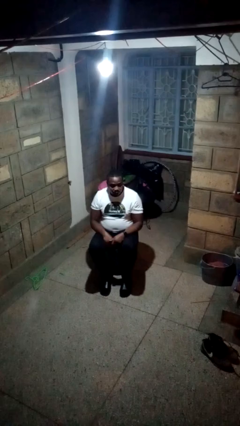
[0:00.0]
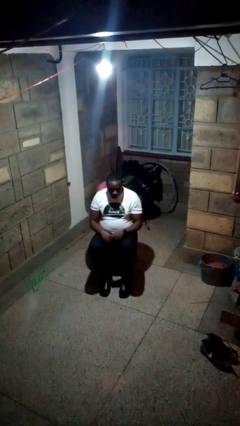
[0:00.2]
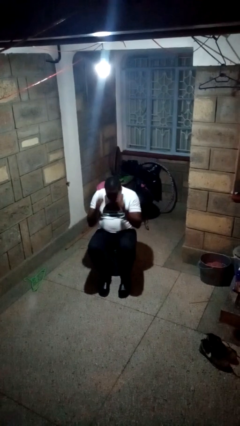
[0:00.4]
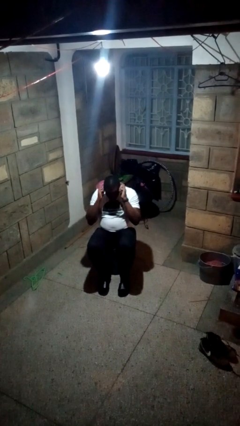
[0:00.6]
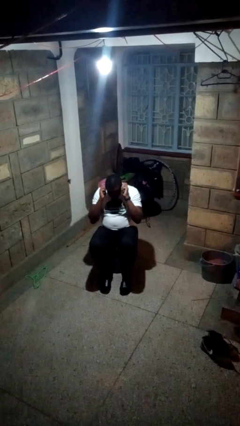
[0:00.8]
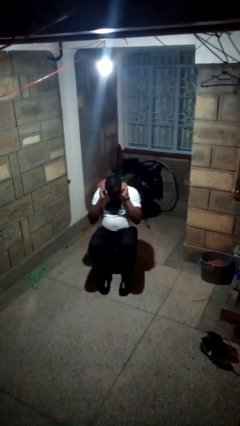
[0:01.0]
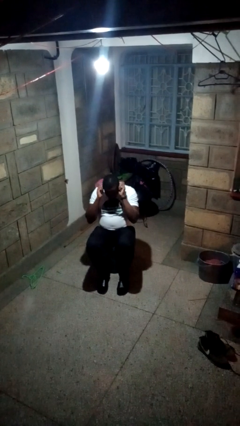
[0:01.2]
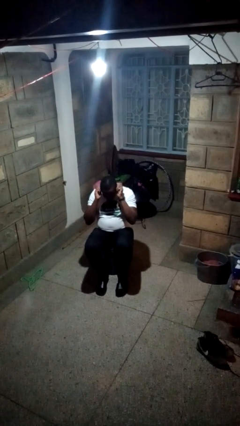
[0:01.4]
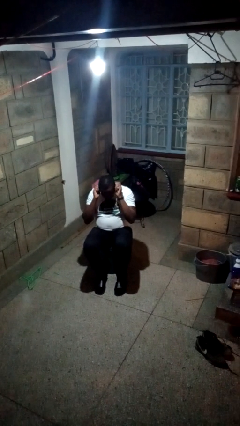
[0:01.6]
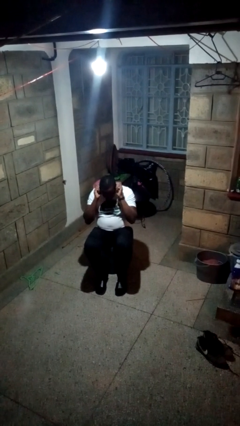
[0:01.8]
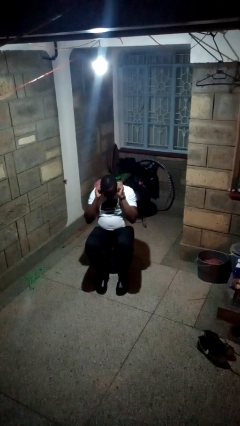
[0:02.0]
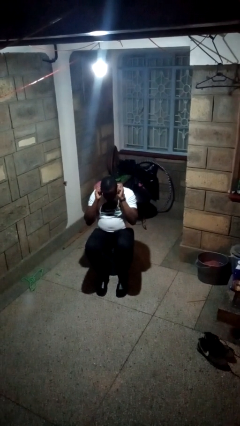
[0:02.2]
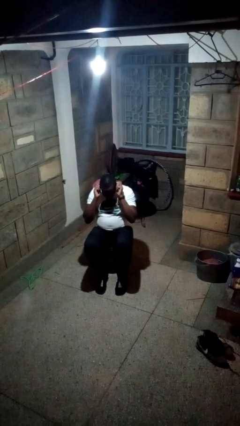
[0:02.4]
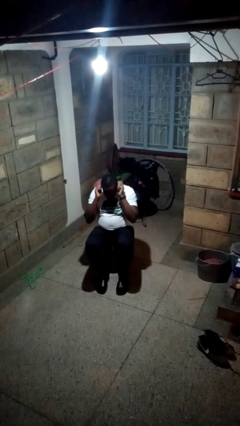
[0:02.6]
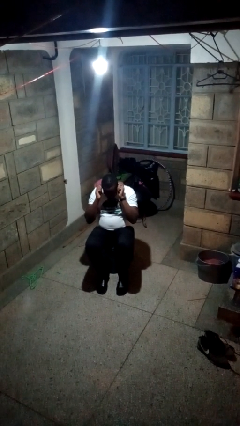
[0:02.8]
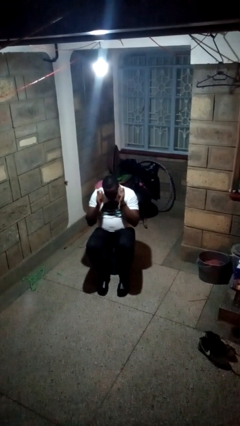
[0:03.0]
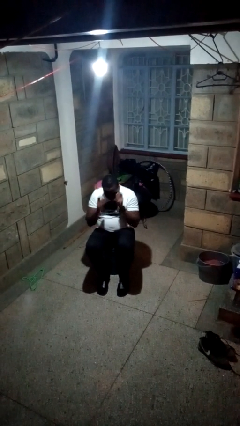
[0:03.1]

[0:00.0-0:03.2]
person touches earlobe

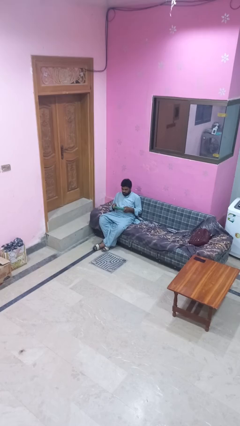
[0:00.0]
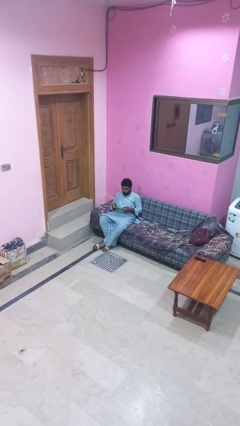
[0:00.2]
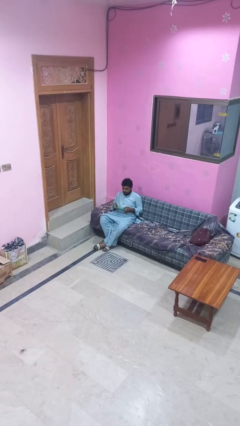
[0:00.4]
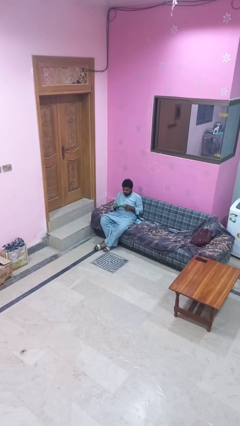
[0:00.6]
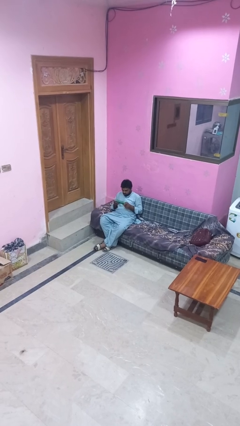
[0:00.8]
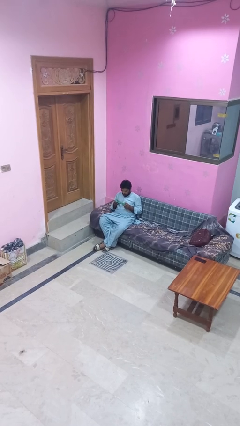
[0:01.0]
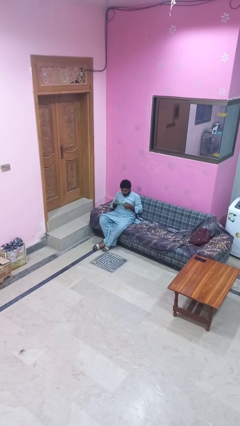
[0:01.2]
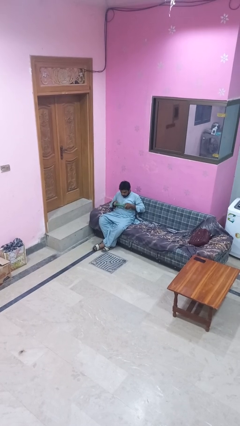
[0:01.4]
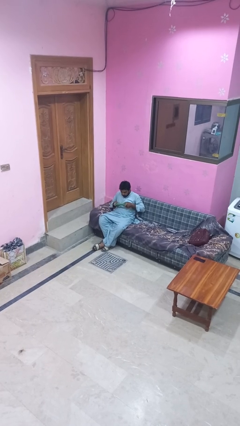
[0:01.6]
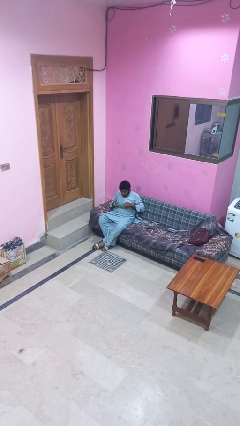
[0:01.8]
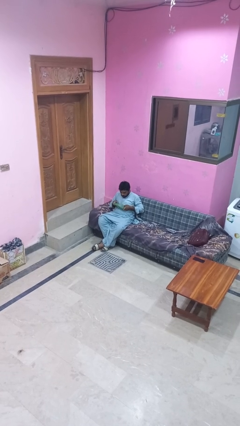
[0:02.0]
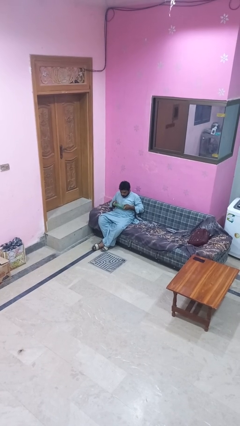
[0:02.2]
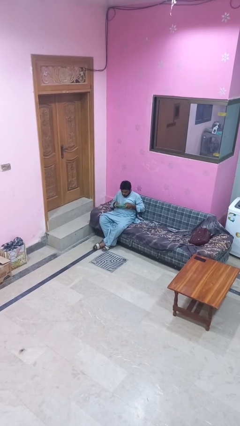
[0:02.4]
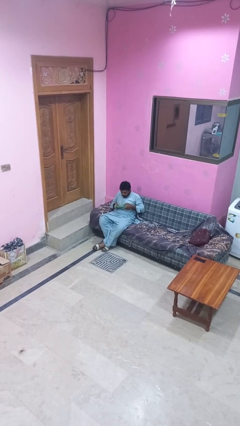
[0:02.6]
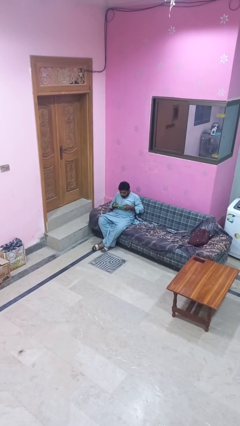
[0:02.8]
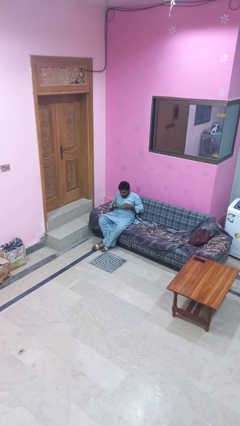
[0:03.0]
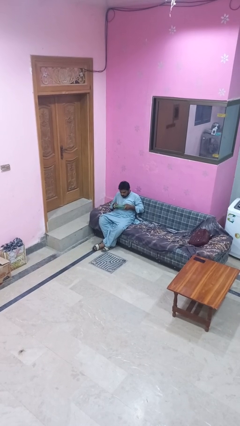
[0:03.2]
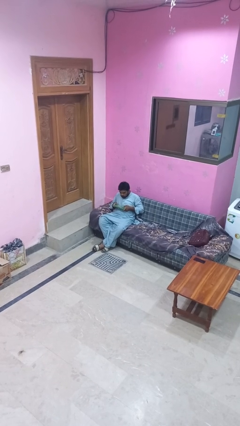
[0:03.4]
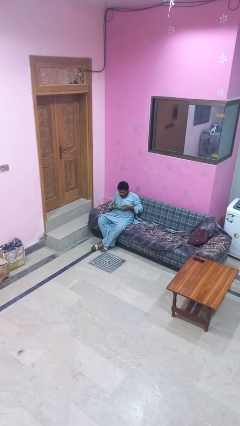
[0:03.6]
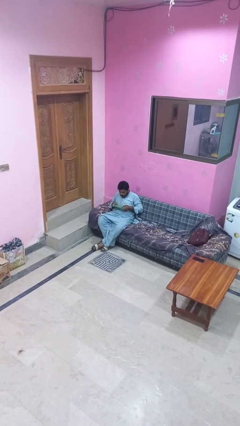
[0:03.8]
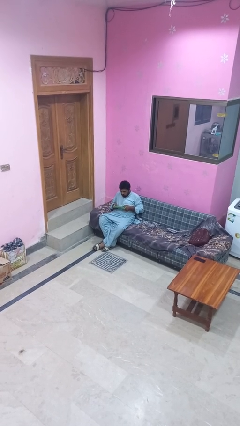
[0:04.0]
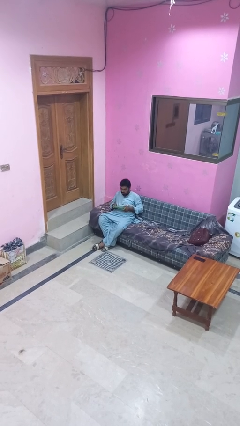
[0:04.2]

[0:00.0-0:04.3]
person interacts with handheld game

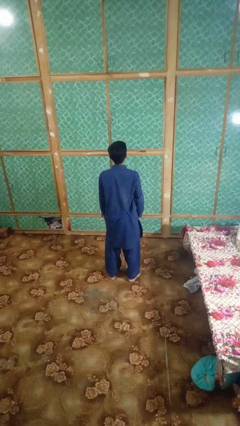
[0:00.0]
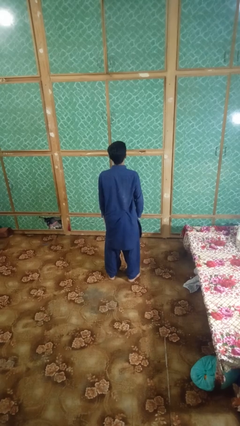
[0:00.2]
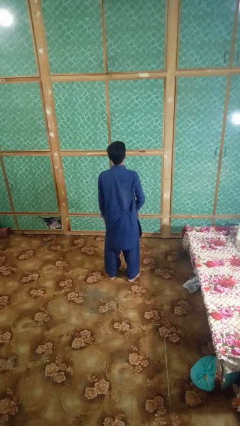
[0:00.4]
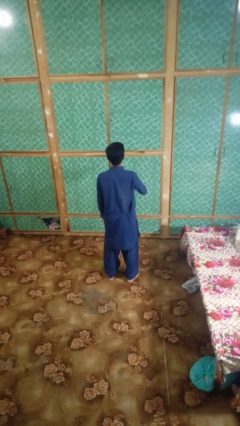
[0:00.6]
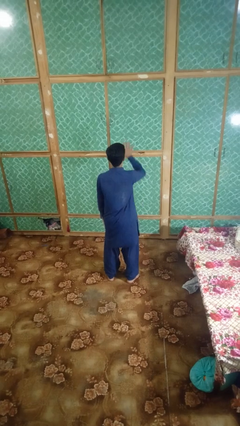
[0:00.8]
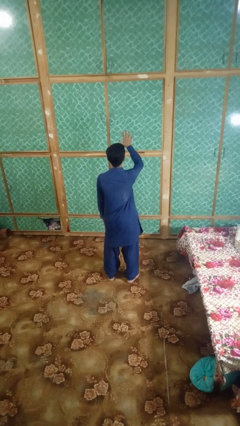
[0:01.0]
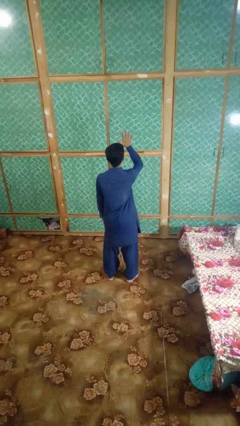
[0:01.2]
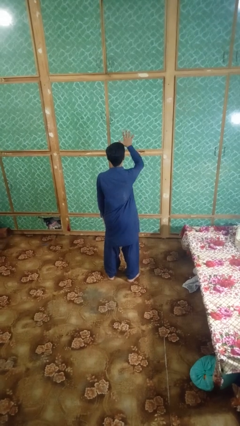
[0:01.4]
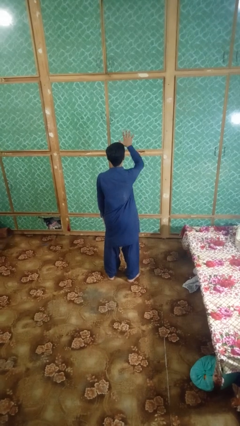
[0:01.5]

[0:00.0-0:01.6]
person gestures number five

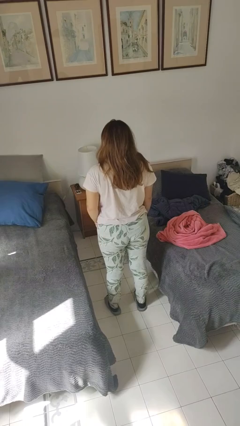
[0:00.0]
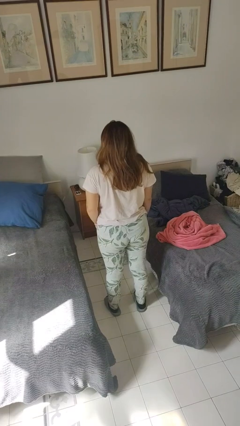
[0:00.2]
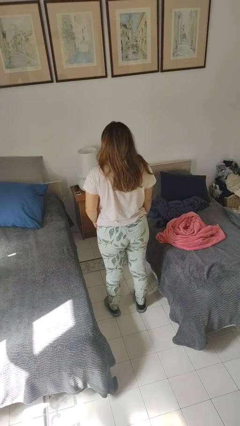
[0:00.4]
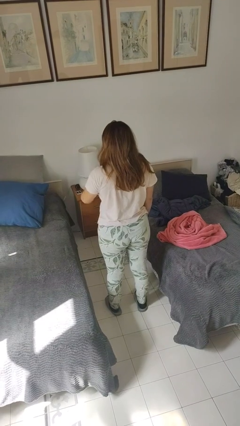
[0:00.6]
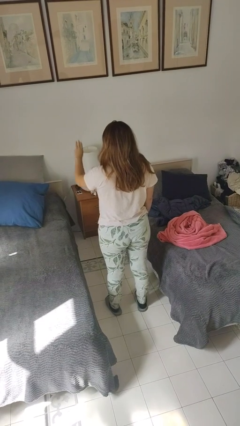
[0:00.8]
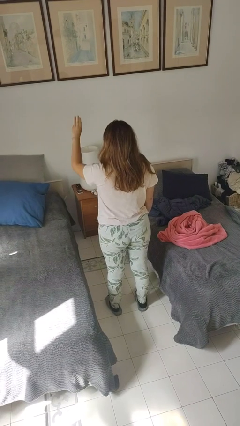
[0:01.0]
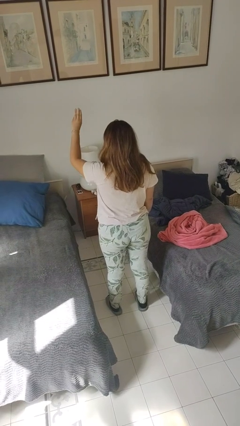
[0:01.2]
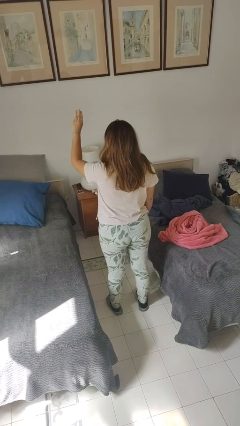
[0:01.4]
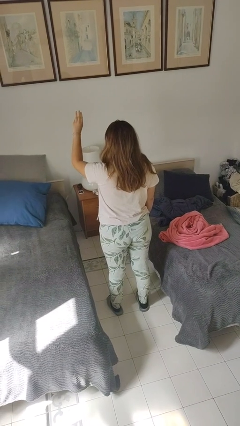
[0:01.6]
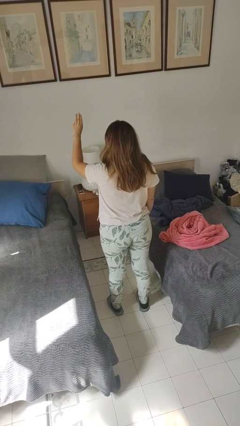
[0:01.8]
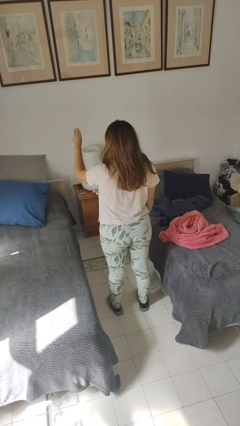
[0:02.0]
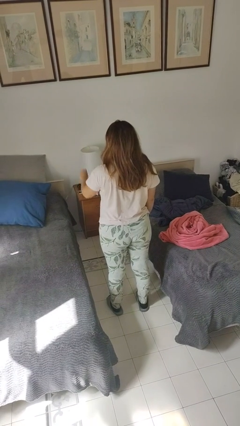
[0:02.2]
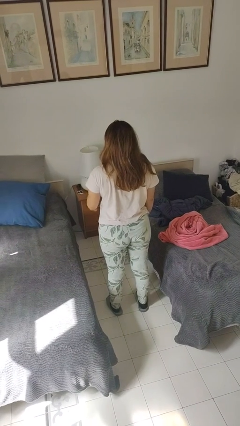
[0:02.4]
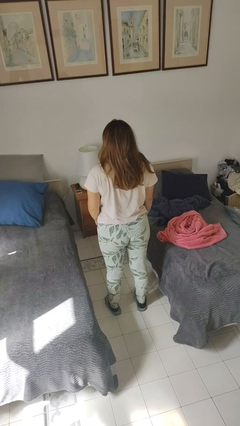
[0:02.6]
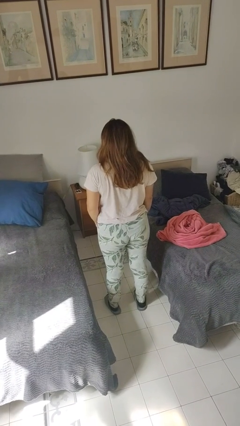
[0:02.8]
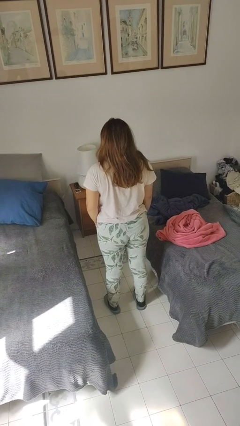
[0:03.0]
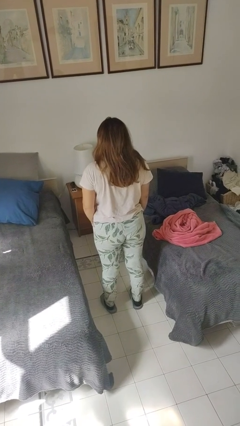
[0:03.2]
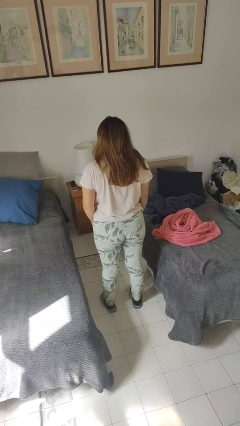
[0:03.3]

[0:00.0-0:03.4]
person gestures number three

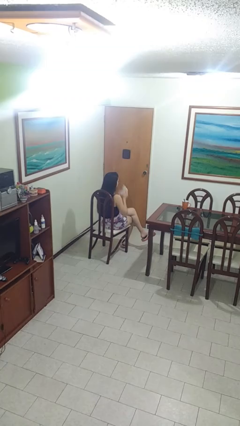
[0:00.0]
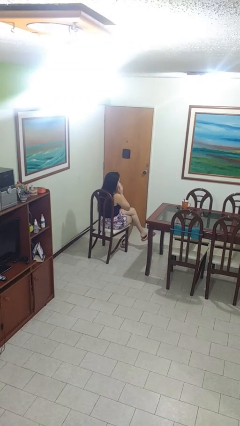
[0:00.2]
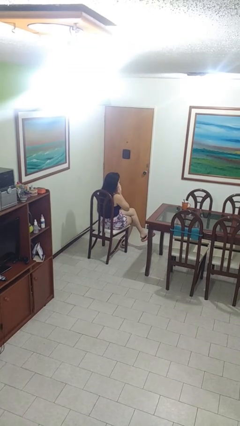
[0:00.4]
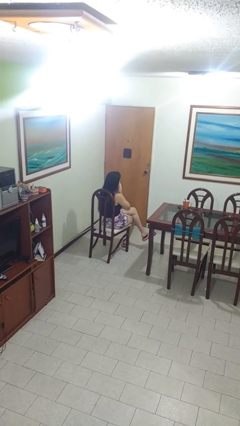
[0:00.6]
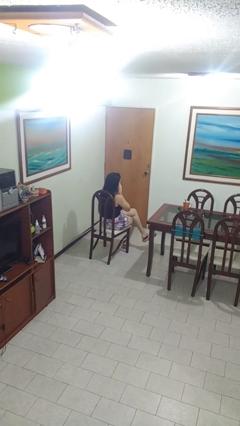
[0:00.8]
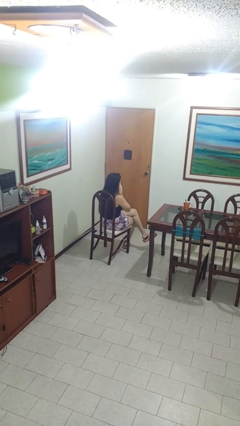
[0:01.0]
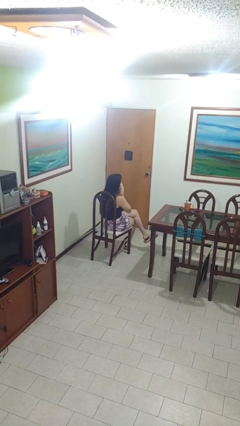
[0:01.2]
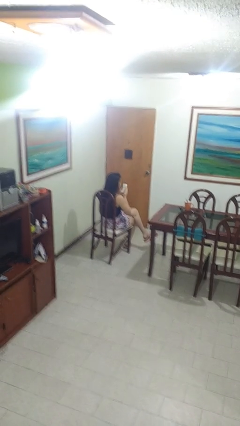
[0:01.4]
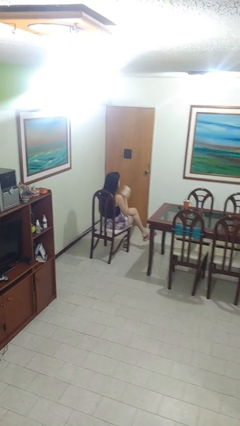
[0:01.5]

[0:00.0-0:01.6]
person blows nose

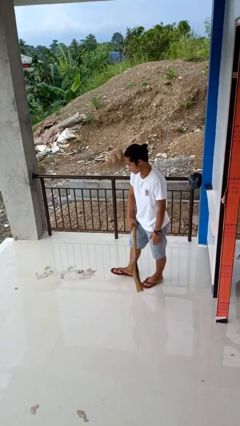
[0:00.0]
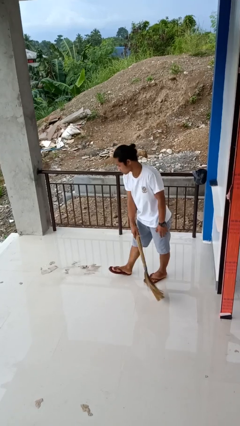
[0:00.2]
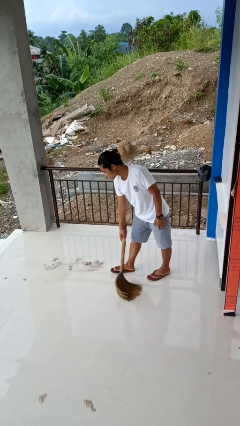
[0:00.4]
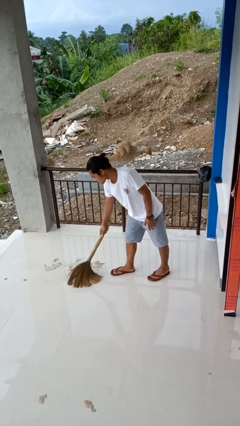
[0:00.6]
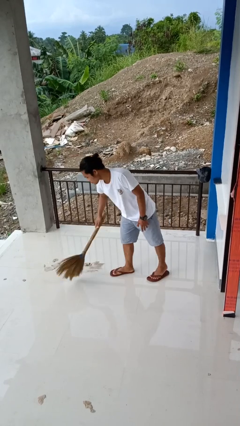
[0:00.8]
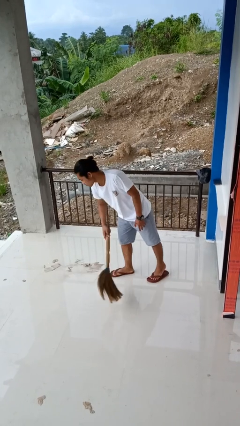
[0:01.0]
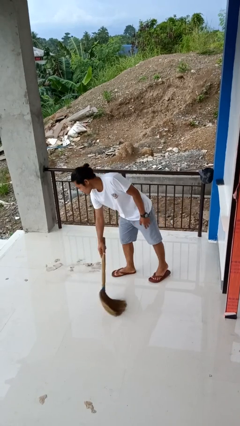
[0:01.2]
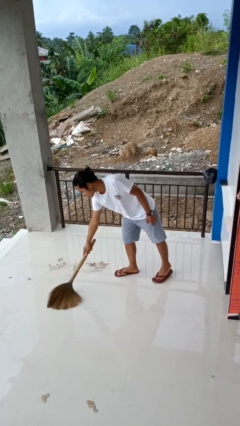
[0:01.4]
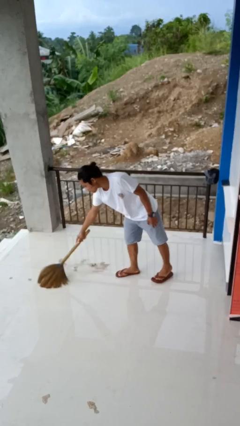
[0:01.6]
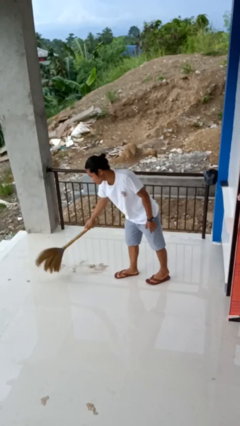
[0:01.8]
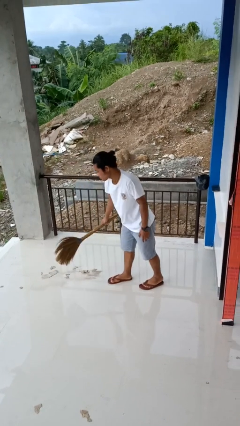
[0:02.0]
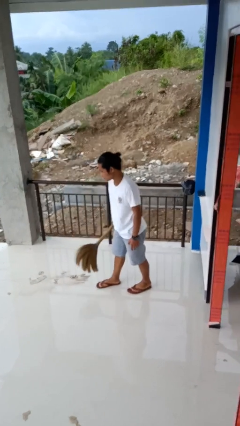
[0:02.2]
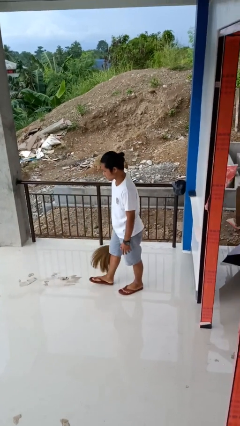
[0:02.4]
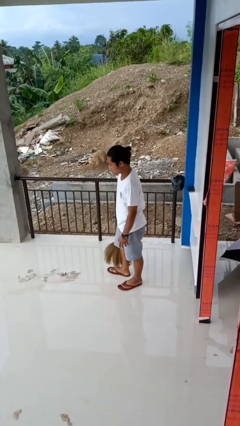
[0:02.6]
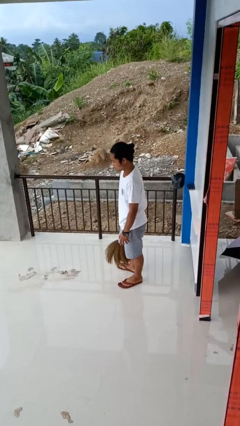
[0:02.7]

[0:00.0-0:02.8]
person sweeps floor

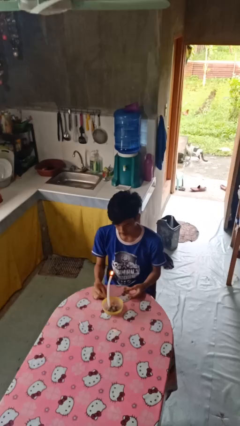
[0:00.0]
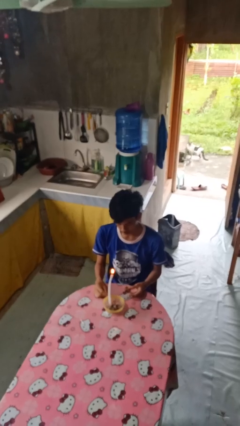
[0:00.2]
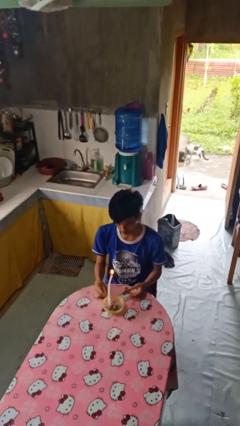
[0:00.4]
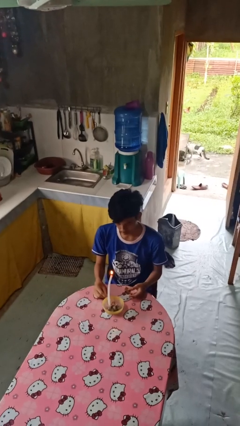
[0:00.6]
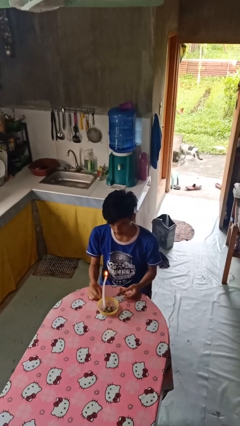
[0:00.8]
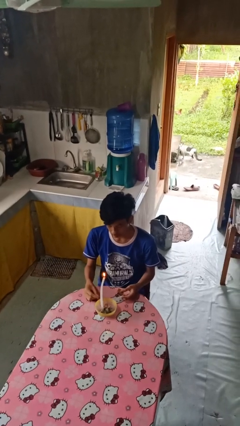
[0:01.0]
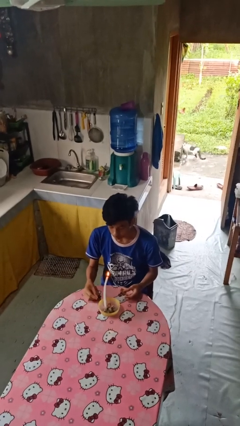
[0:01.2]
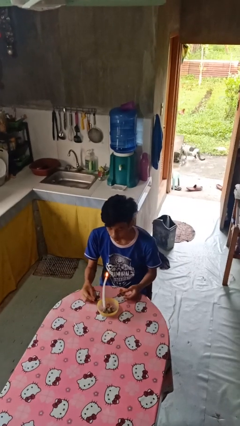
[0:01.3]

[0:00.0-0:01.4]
person extinguishes candle
